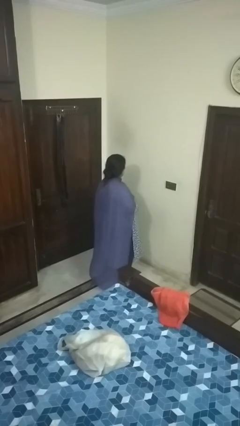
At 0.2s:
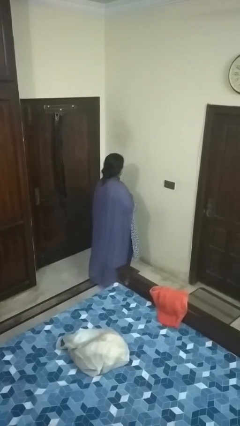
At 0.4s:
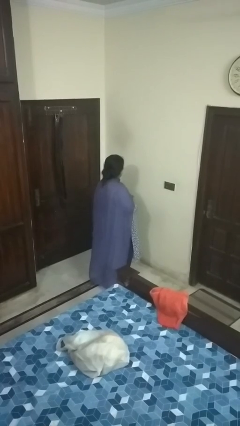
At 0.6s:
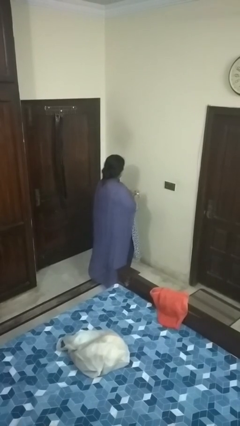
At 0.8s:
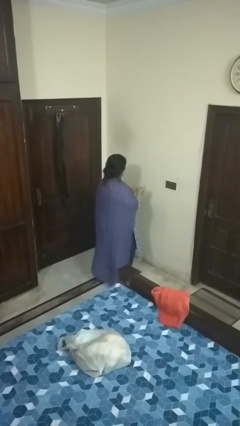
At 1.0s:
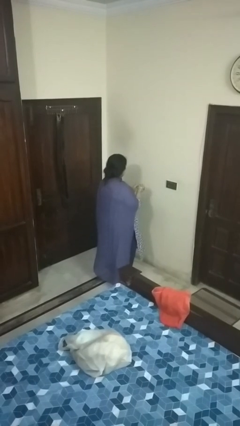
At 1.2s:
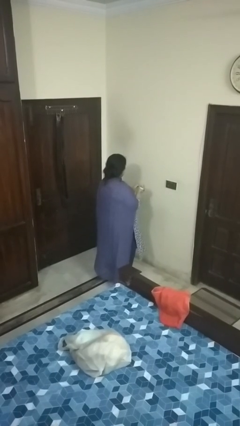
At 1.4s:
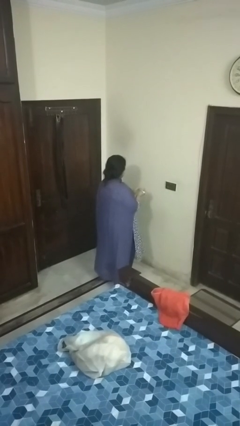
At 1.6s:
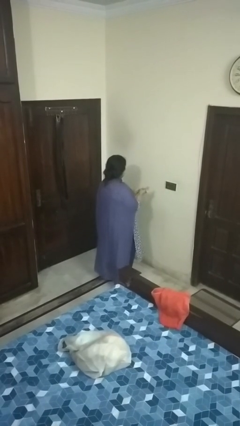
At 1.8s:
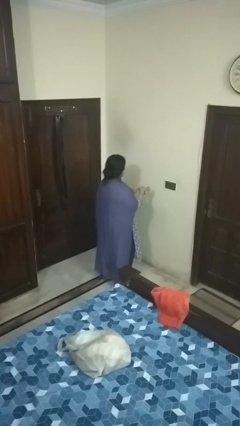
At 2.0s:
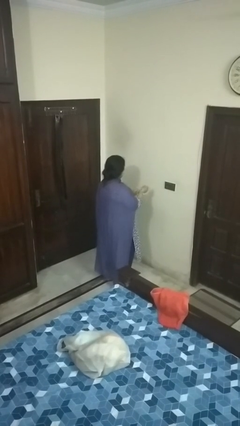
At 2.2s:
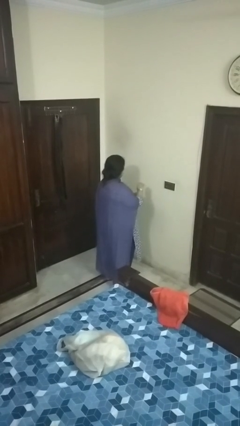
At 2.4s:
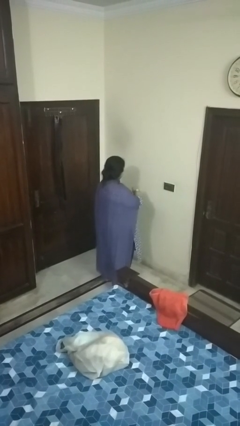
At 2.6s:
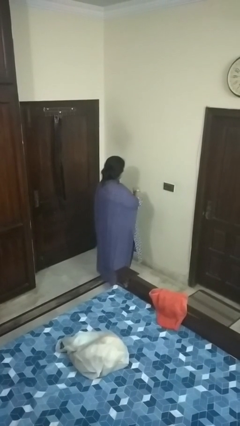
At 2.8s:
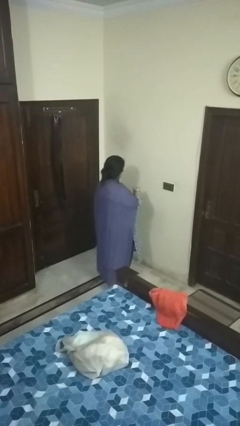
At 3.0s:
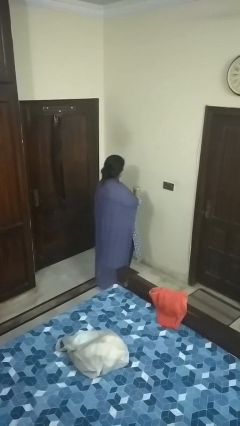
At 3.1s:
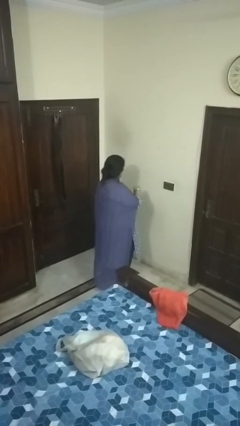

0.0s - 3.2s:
person puts on wristwatch

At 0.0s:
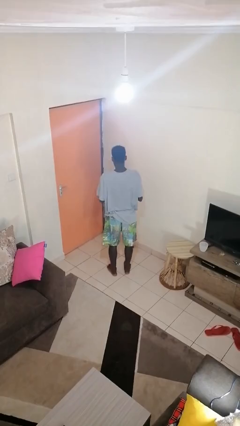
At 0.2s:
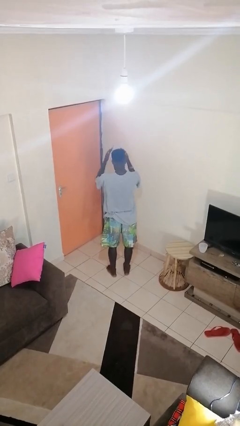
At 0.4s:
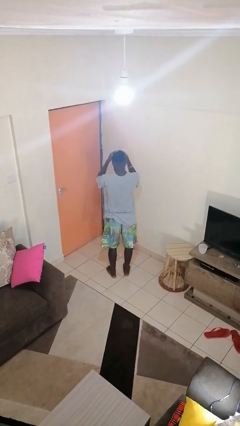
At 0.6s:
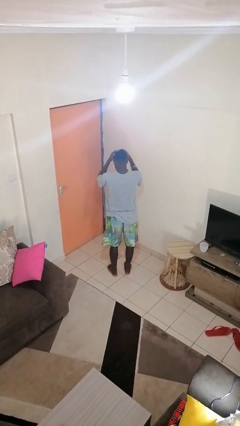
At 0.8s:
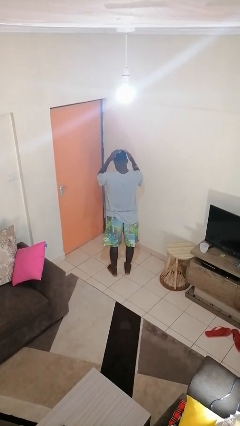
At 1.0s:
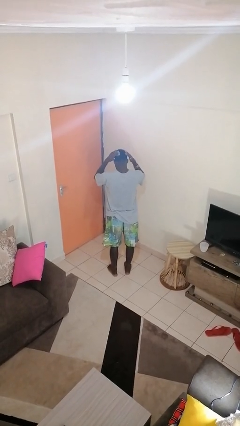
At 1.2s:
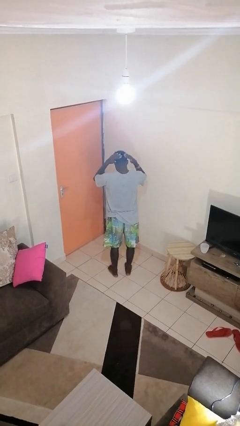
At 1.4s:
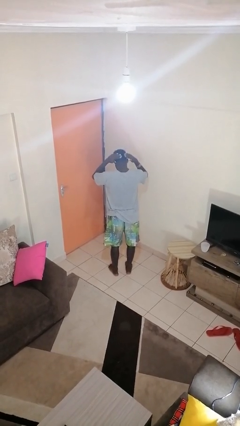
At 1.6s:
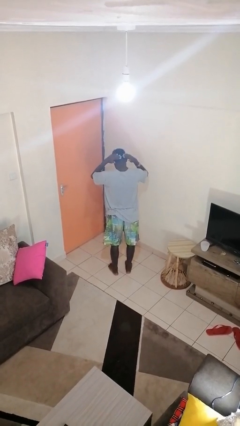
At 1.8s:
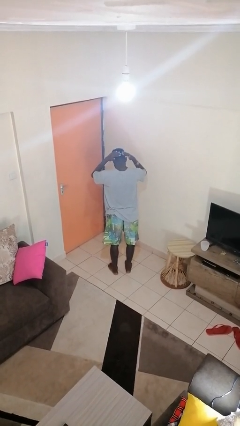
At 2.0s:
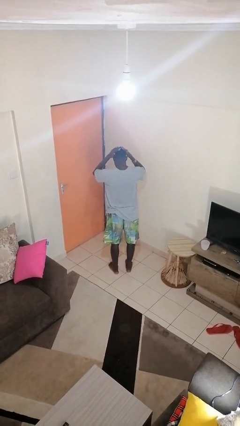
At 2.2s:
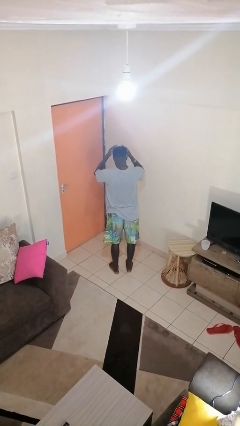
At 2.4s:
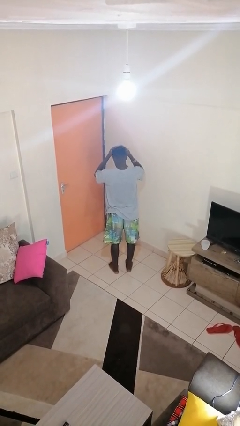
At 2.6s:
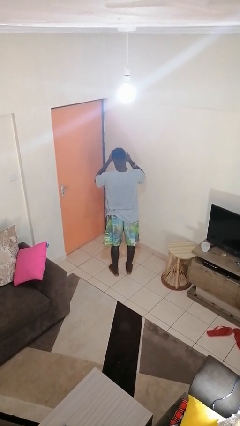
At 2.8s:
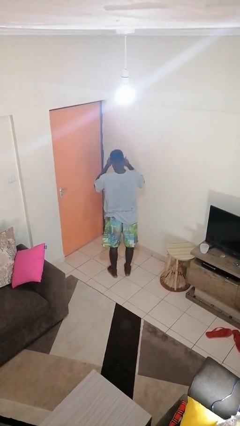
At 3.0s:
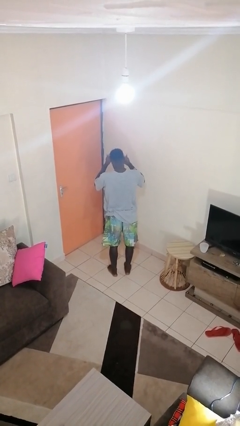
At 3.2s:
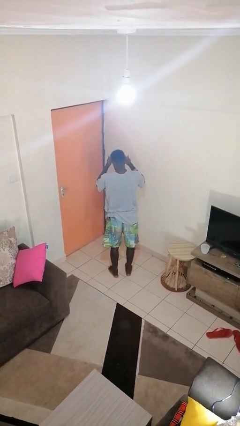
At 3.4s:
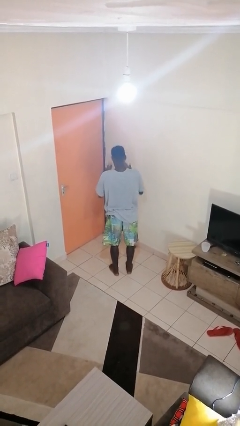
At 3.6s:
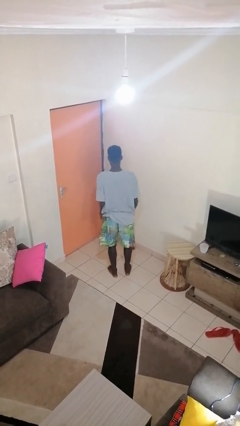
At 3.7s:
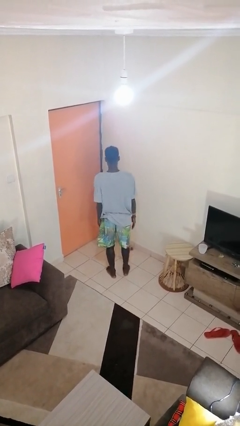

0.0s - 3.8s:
person pats head

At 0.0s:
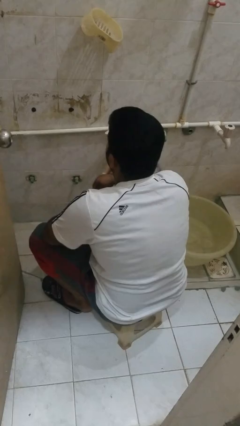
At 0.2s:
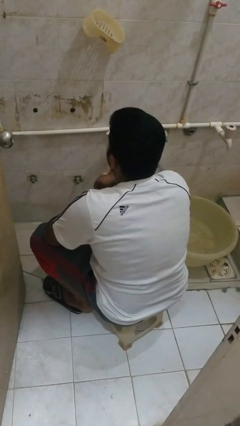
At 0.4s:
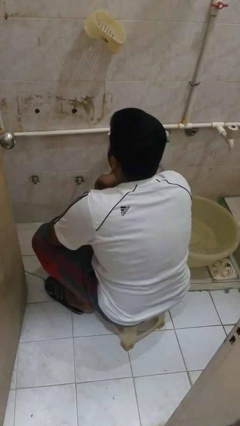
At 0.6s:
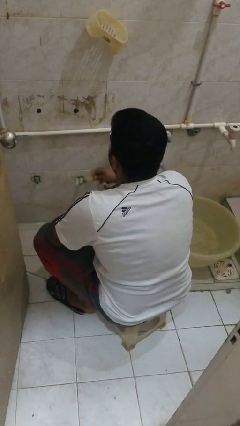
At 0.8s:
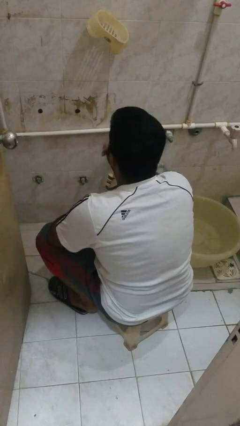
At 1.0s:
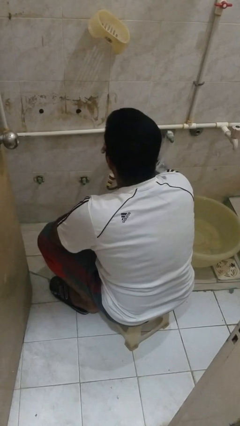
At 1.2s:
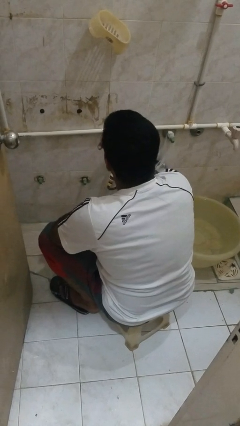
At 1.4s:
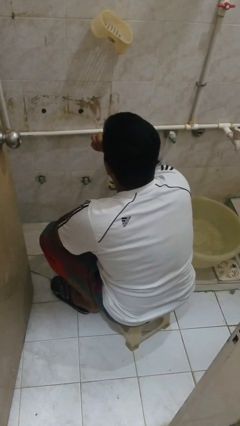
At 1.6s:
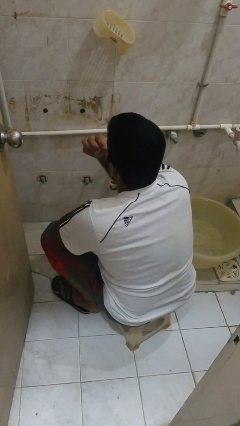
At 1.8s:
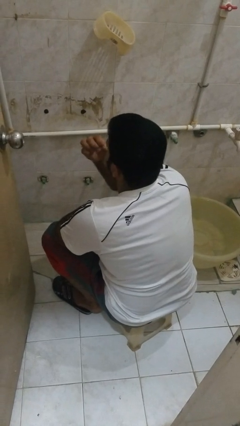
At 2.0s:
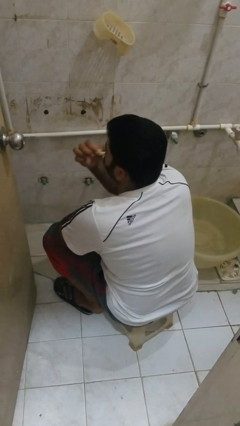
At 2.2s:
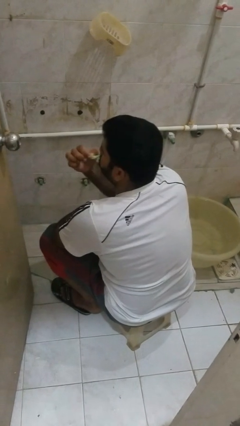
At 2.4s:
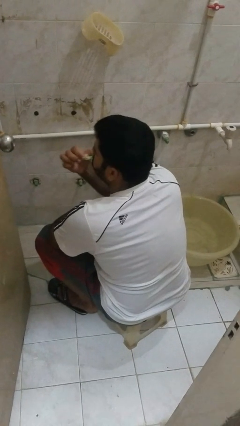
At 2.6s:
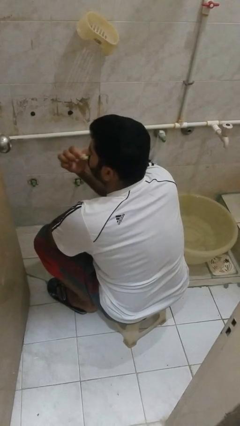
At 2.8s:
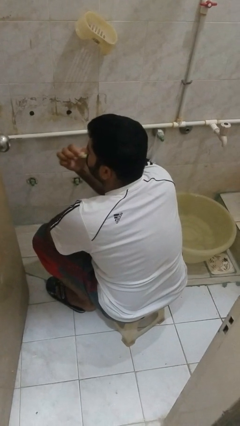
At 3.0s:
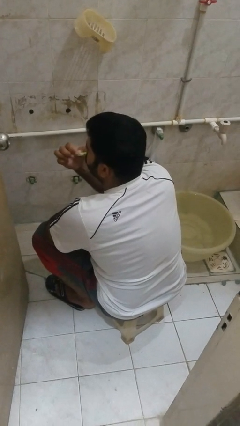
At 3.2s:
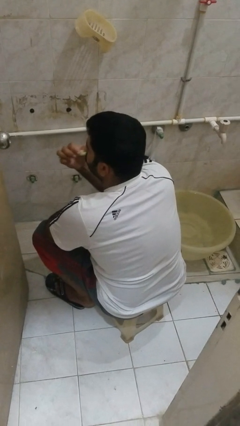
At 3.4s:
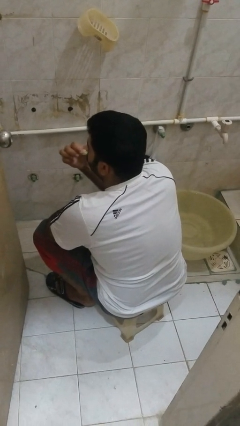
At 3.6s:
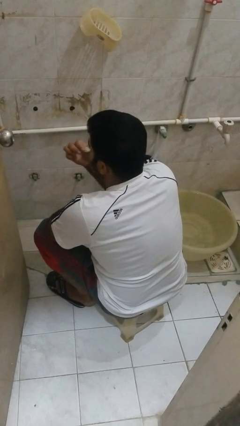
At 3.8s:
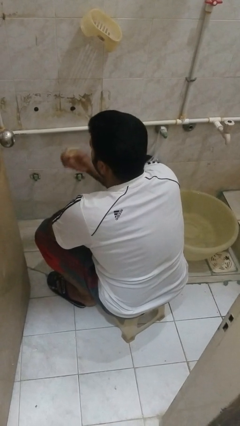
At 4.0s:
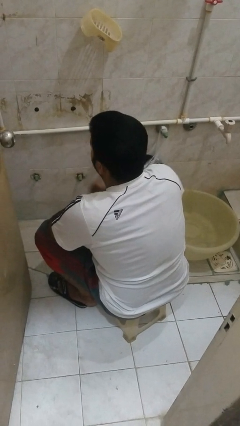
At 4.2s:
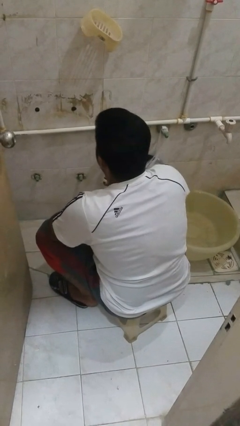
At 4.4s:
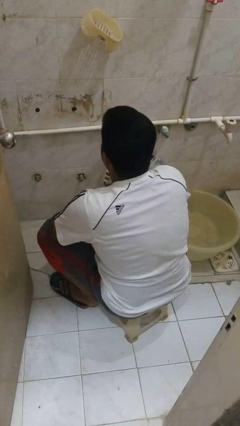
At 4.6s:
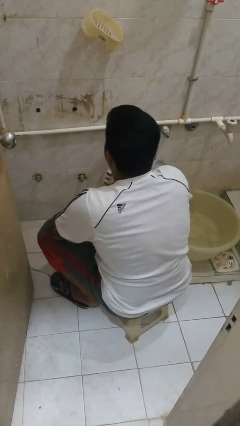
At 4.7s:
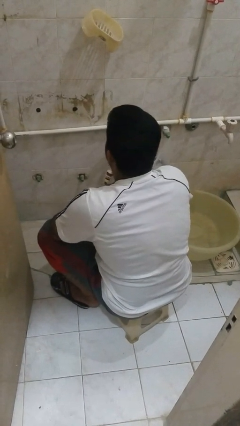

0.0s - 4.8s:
person brushes teeth

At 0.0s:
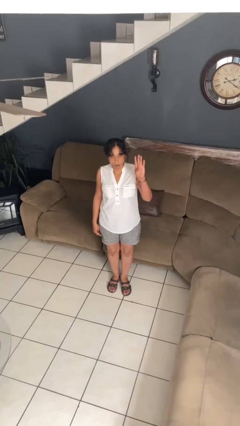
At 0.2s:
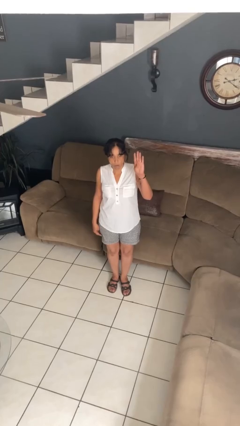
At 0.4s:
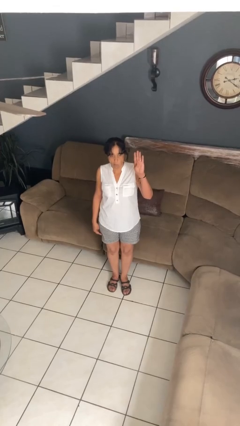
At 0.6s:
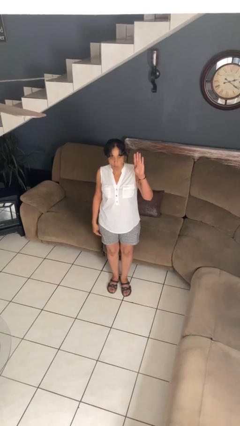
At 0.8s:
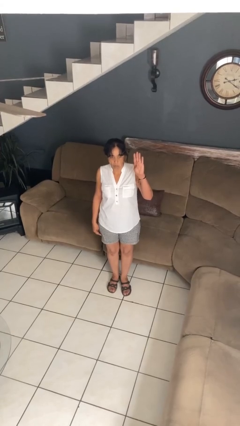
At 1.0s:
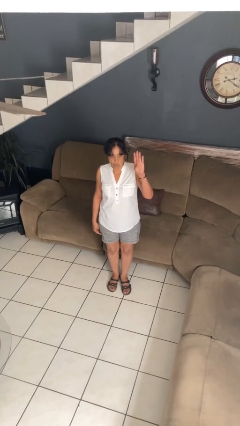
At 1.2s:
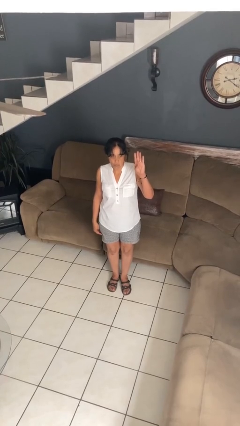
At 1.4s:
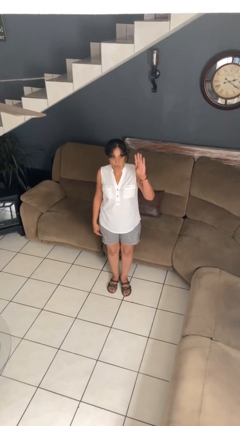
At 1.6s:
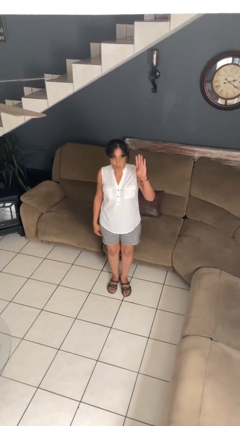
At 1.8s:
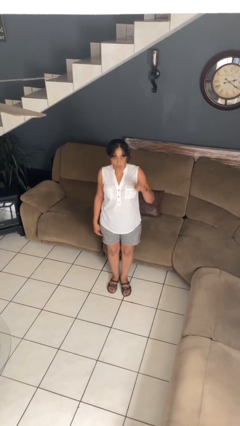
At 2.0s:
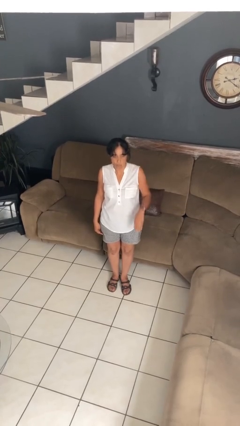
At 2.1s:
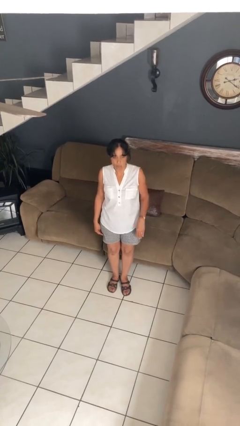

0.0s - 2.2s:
person gestures number four

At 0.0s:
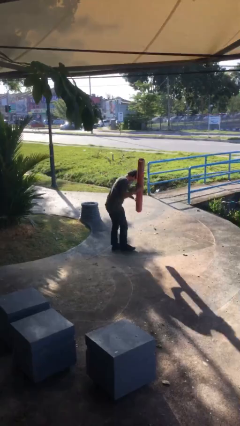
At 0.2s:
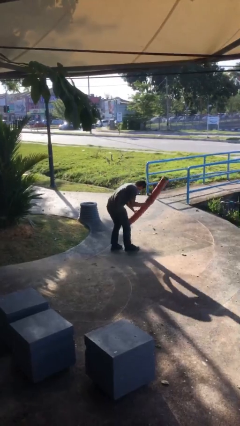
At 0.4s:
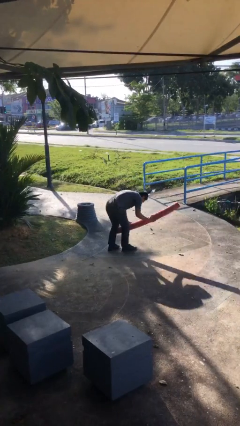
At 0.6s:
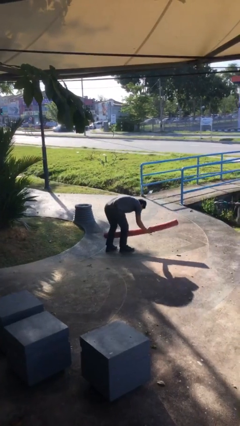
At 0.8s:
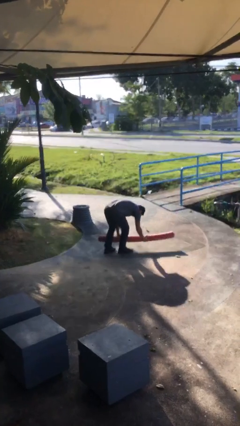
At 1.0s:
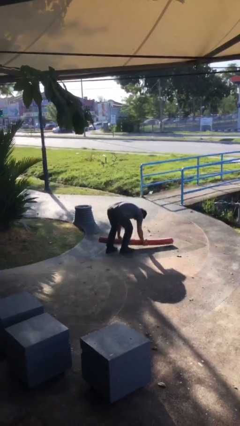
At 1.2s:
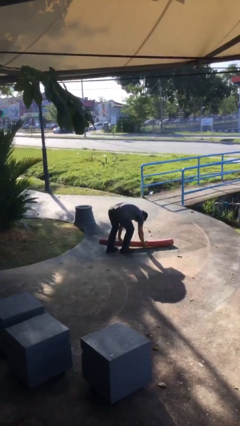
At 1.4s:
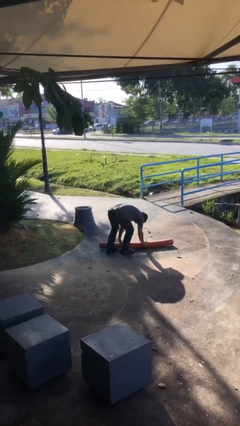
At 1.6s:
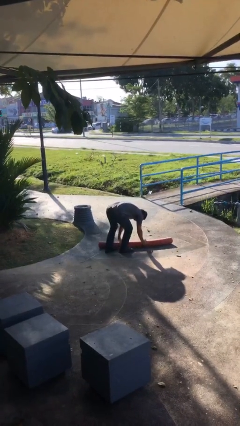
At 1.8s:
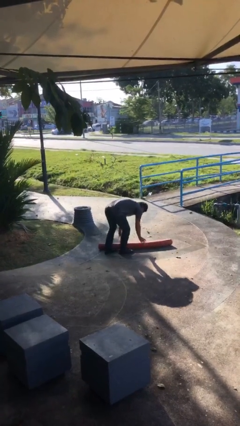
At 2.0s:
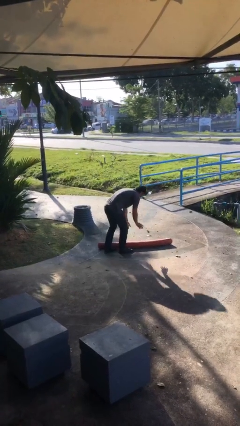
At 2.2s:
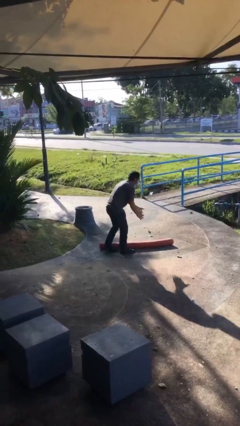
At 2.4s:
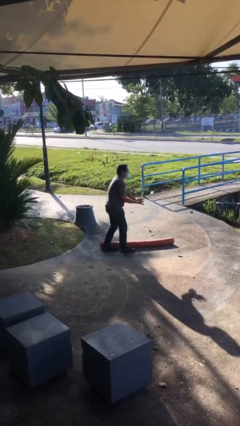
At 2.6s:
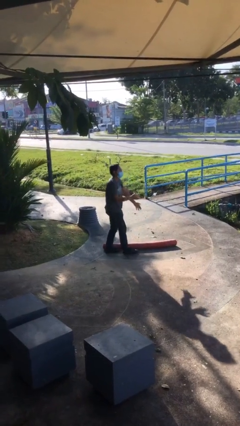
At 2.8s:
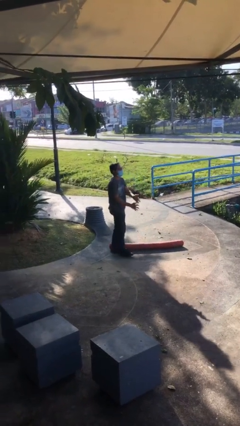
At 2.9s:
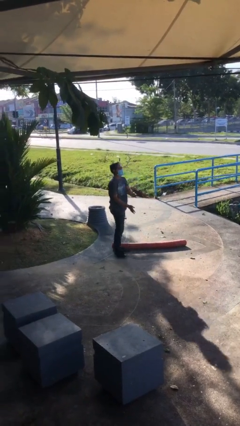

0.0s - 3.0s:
person puts down object on floor

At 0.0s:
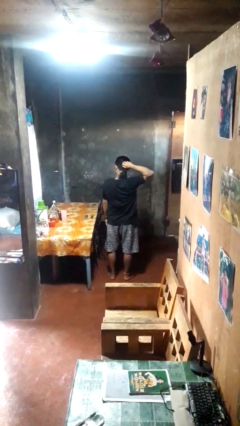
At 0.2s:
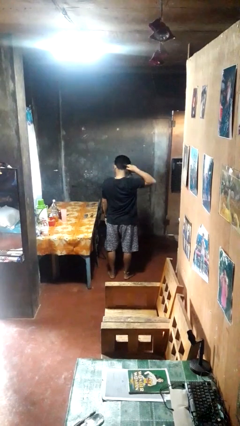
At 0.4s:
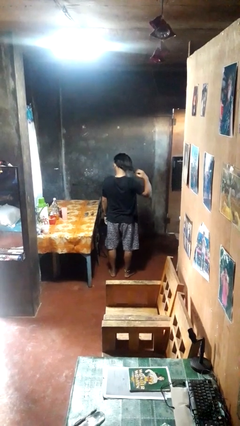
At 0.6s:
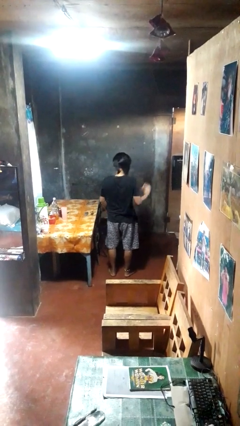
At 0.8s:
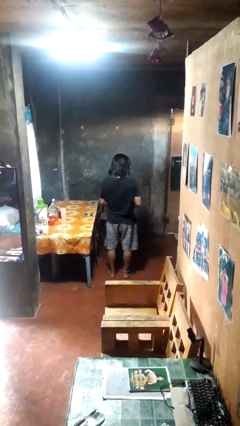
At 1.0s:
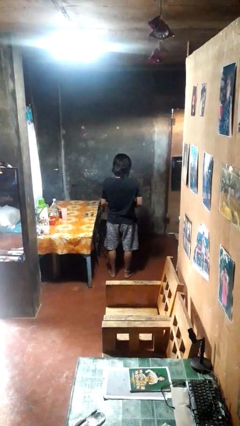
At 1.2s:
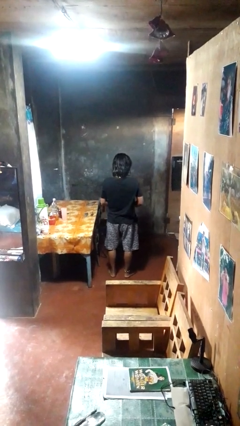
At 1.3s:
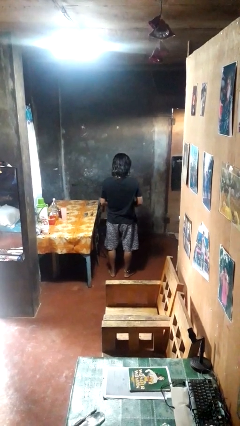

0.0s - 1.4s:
person takes off hairtie
